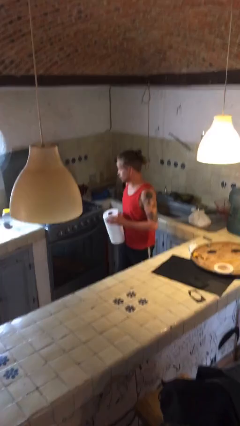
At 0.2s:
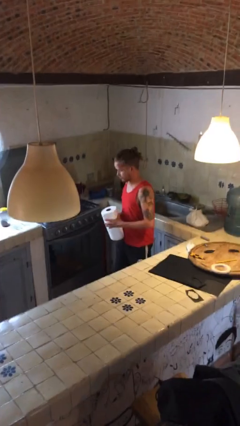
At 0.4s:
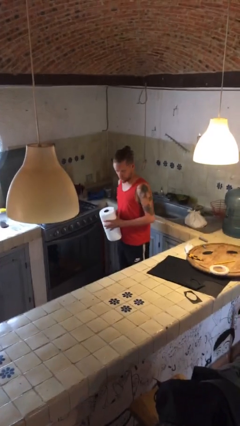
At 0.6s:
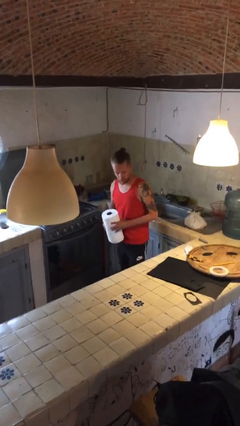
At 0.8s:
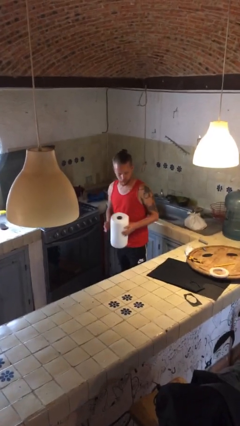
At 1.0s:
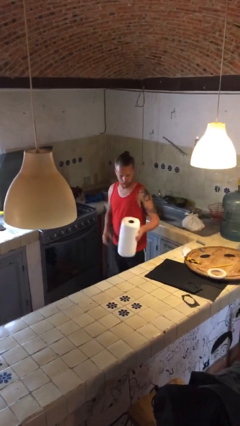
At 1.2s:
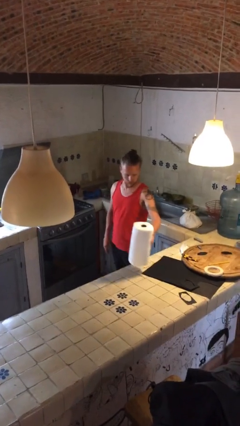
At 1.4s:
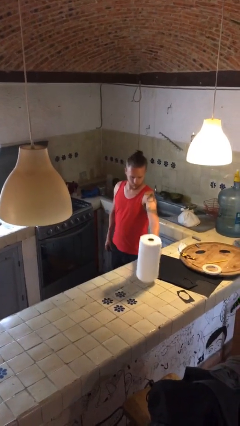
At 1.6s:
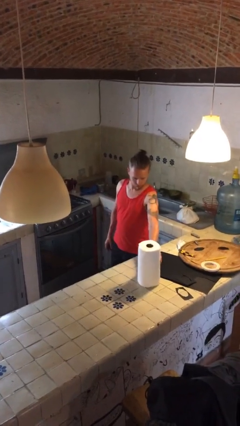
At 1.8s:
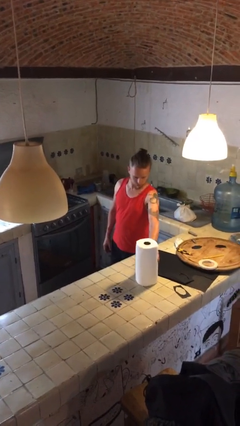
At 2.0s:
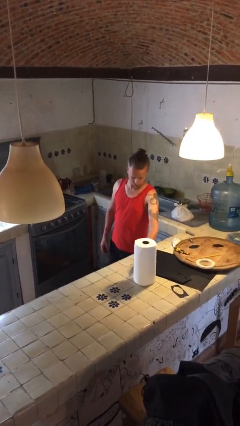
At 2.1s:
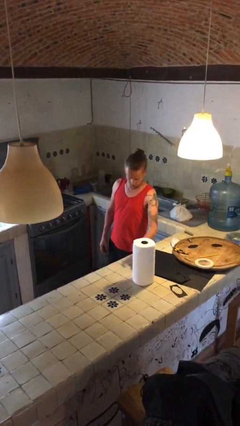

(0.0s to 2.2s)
person puts down object on countertop

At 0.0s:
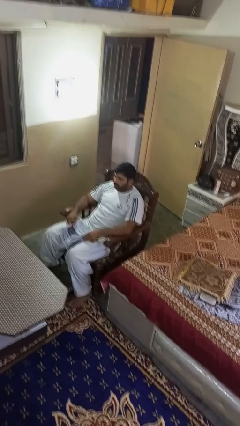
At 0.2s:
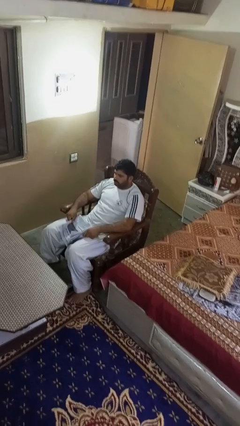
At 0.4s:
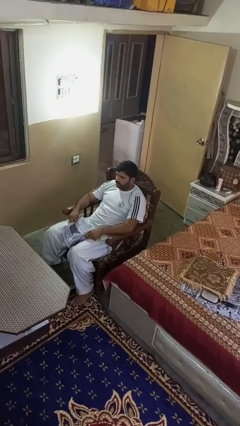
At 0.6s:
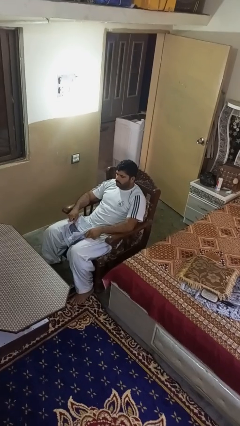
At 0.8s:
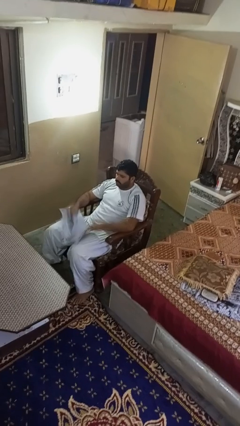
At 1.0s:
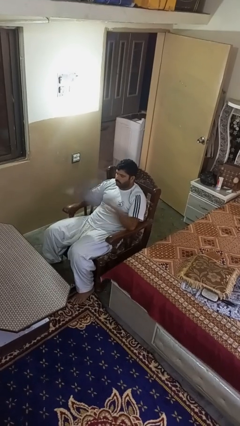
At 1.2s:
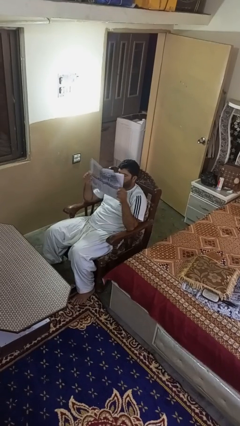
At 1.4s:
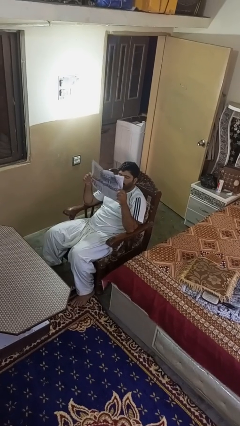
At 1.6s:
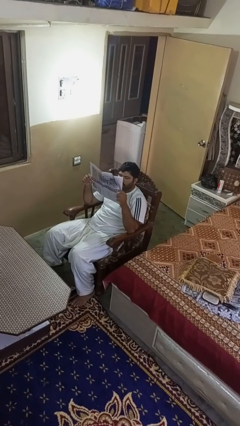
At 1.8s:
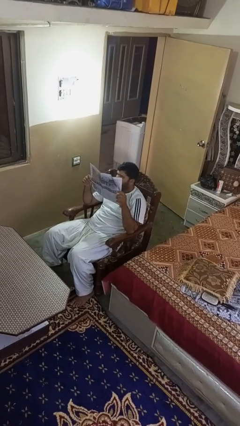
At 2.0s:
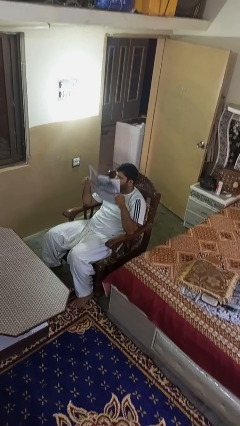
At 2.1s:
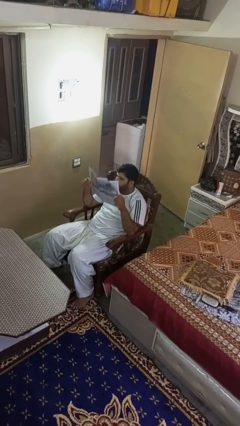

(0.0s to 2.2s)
person reads newspaper

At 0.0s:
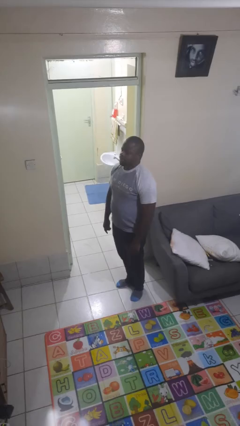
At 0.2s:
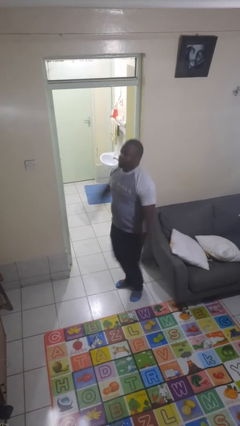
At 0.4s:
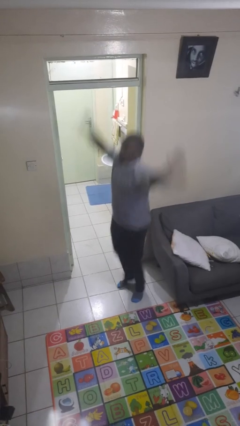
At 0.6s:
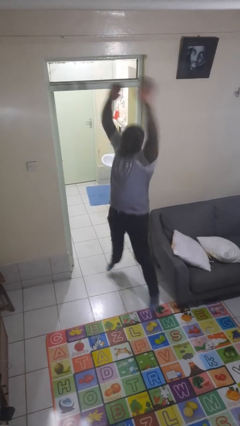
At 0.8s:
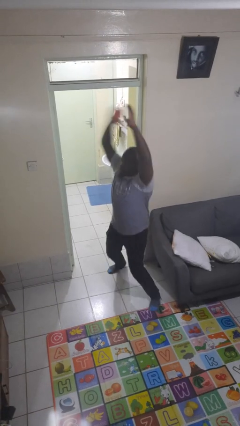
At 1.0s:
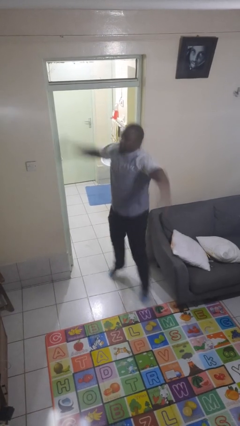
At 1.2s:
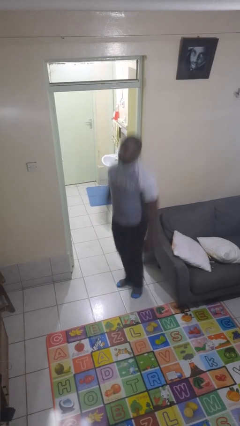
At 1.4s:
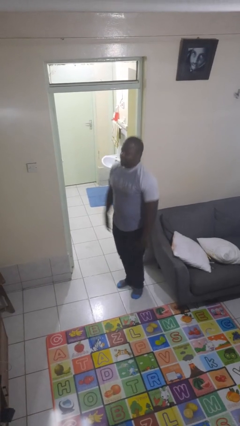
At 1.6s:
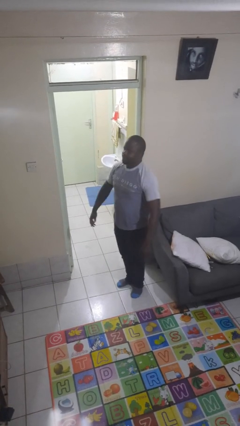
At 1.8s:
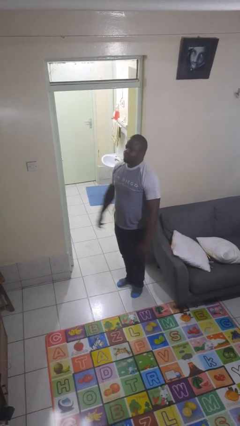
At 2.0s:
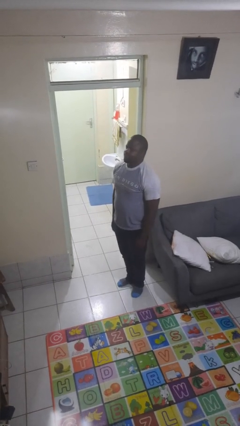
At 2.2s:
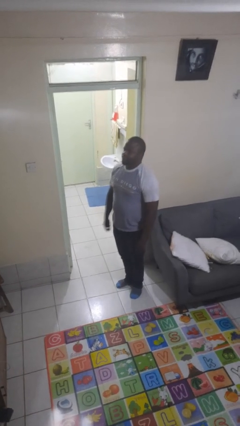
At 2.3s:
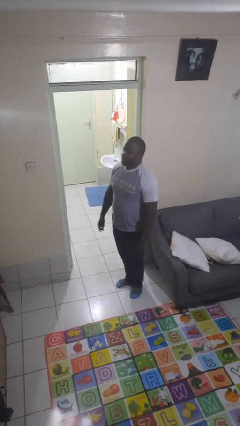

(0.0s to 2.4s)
person exercises with jumping jacks

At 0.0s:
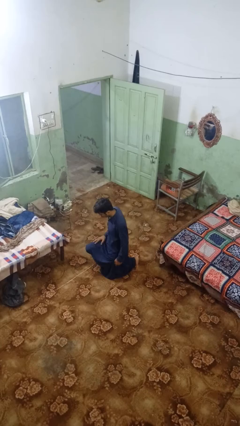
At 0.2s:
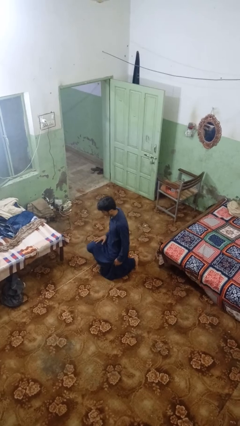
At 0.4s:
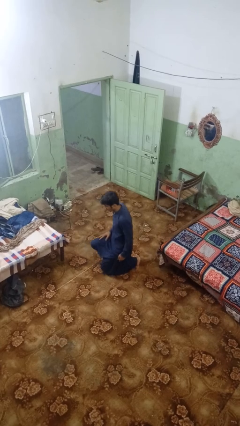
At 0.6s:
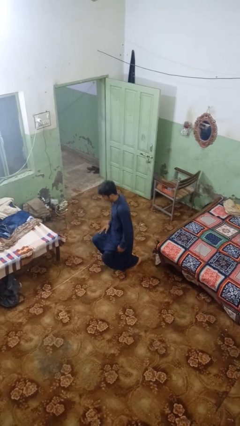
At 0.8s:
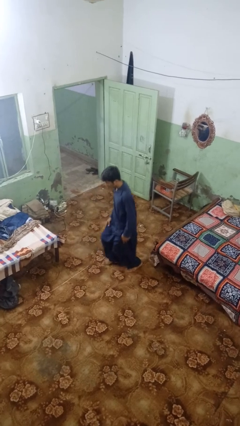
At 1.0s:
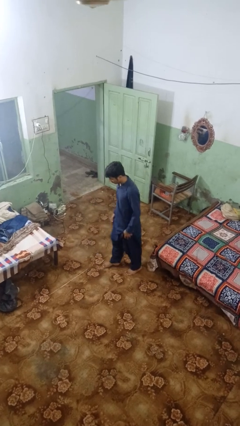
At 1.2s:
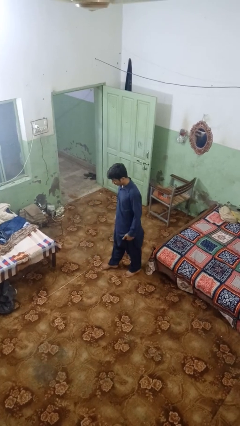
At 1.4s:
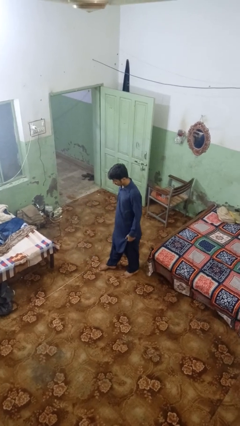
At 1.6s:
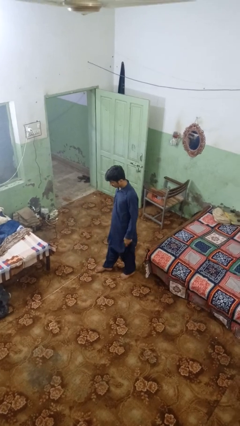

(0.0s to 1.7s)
person stands up from floor

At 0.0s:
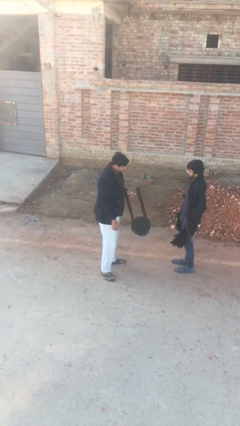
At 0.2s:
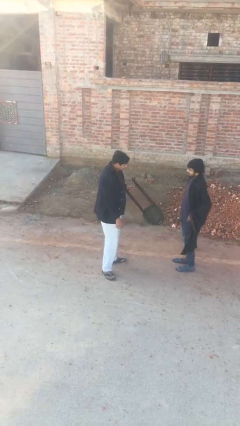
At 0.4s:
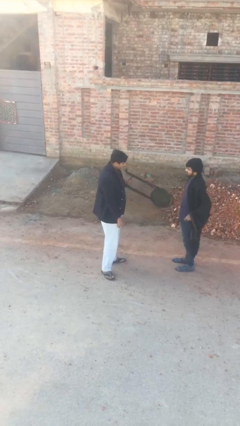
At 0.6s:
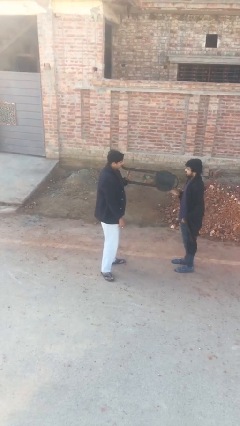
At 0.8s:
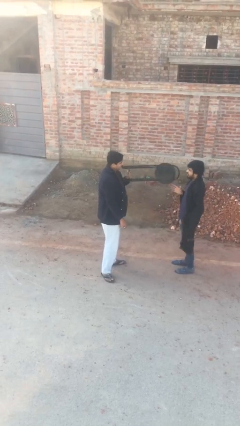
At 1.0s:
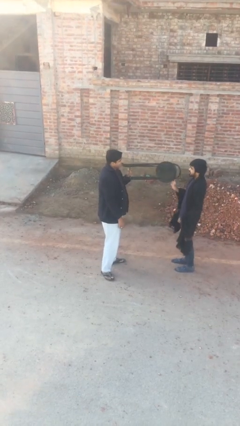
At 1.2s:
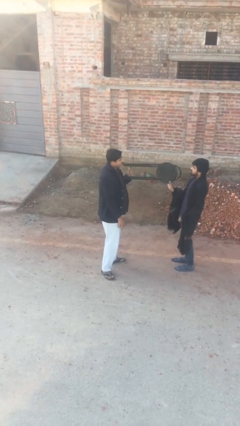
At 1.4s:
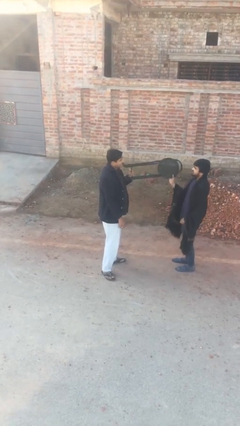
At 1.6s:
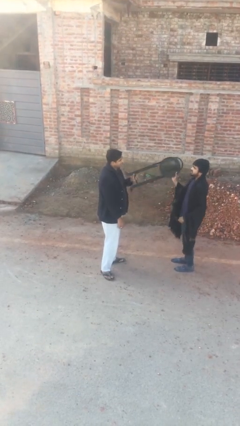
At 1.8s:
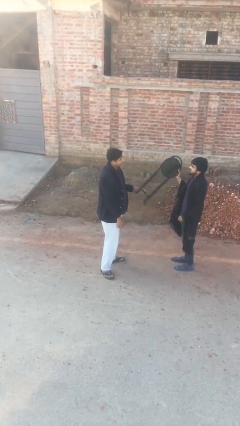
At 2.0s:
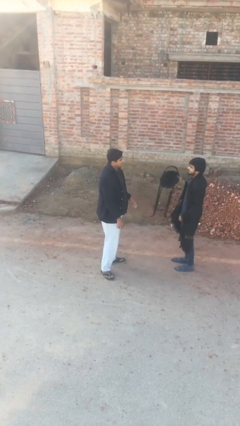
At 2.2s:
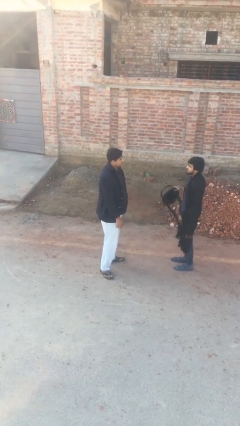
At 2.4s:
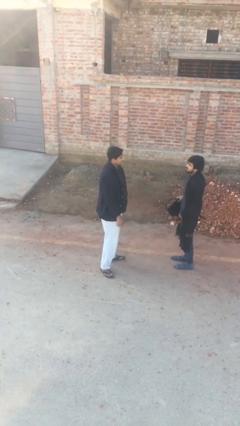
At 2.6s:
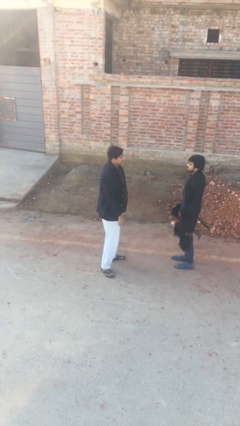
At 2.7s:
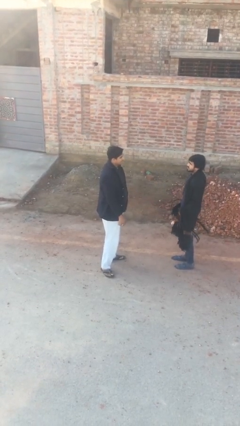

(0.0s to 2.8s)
person transfers object to person

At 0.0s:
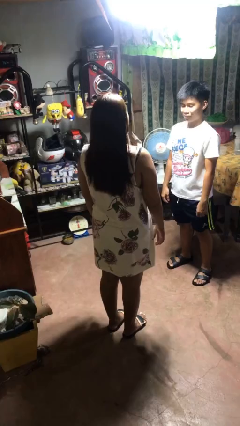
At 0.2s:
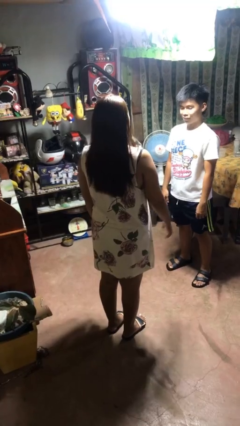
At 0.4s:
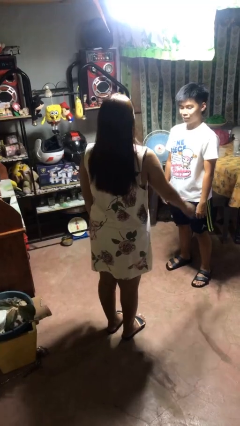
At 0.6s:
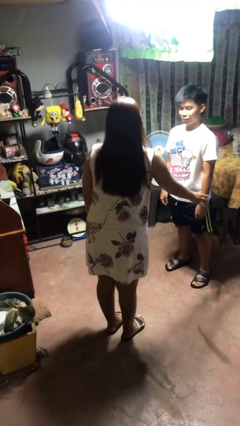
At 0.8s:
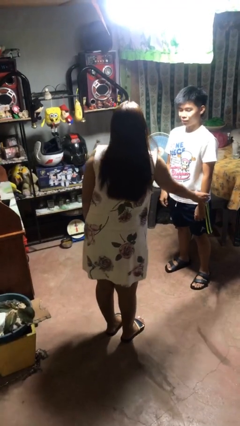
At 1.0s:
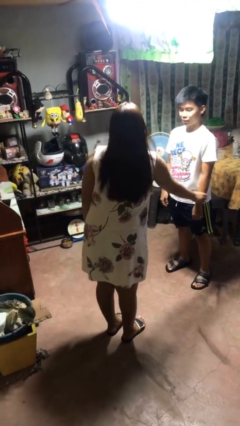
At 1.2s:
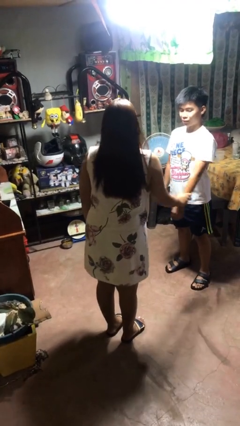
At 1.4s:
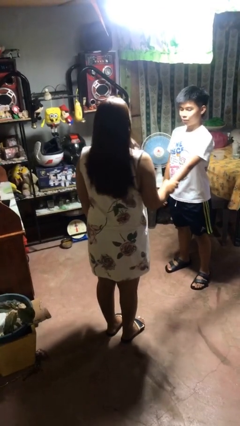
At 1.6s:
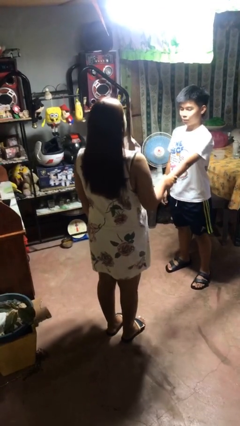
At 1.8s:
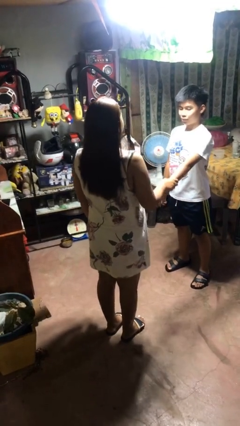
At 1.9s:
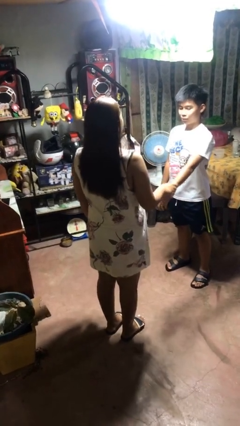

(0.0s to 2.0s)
person grabs person by forearm

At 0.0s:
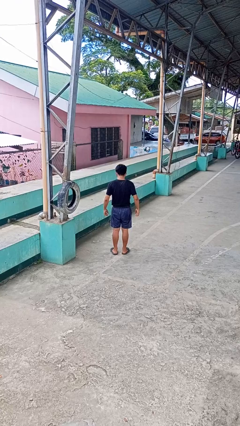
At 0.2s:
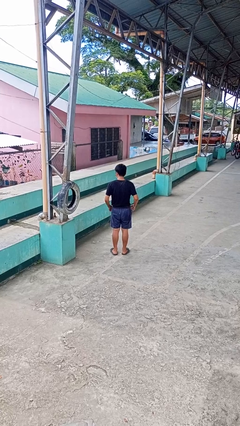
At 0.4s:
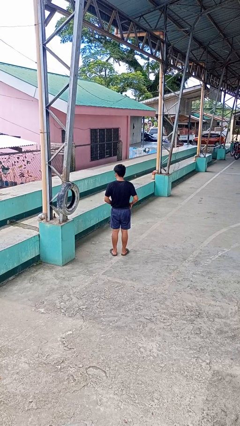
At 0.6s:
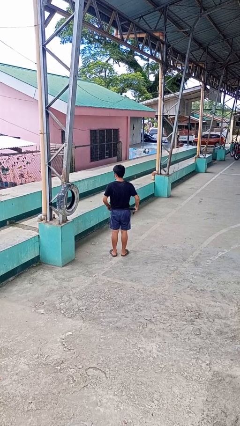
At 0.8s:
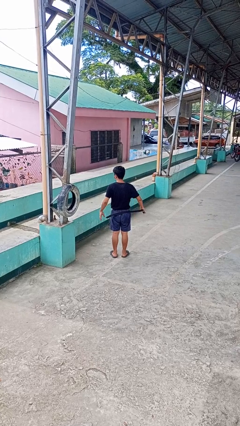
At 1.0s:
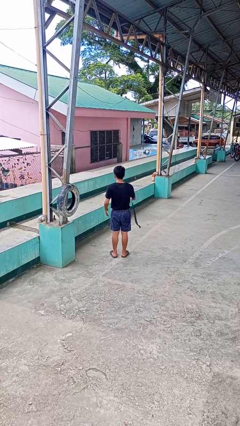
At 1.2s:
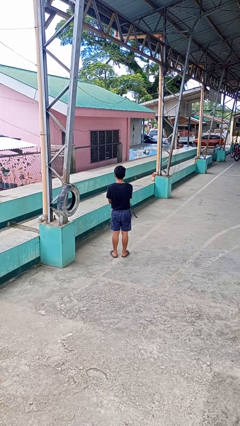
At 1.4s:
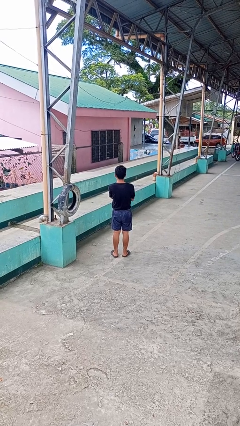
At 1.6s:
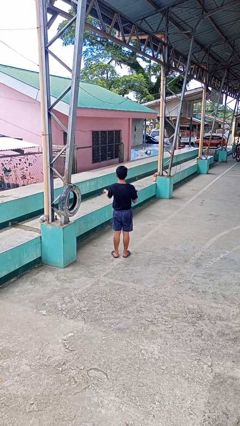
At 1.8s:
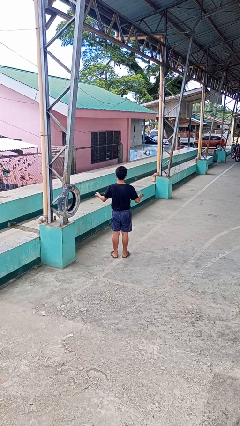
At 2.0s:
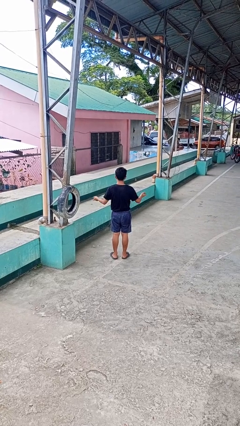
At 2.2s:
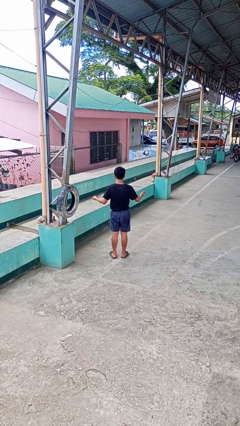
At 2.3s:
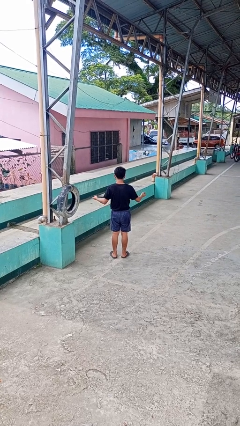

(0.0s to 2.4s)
person takes off belt

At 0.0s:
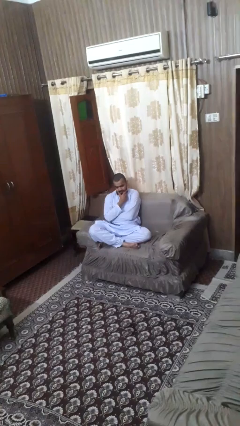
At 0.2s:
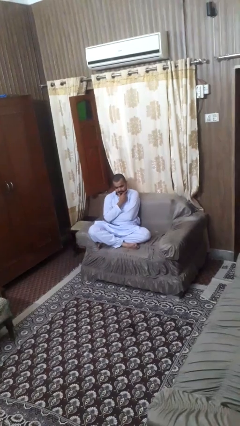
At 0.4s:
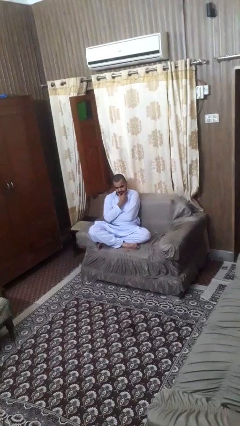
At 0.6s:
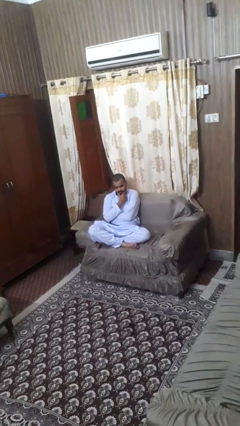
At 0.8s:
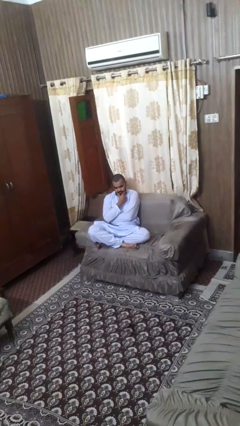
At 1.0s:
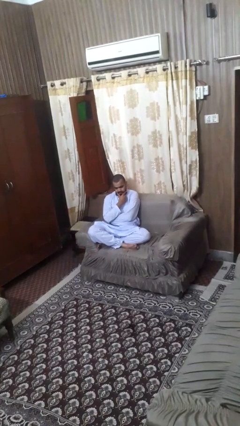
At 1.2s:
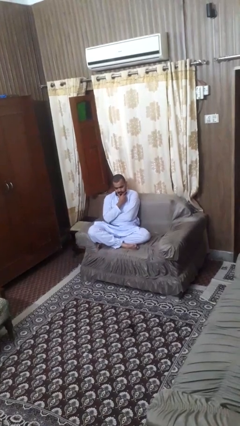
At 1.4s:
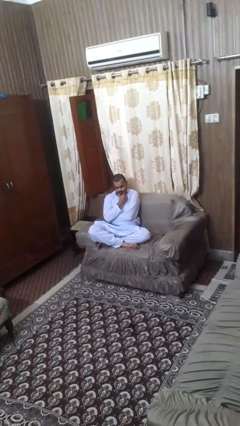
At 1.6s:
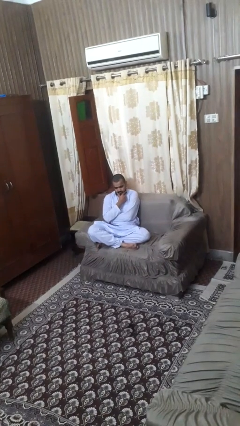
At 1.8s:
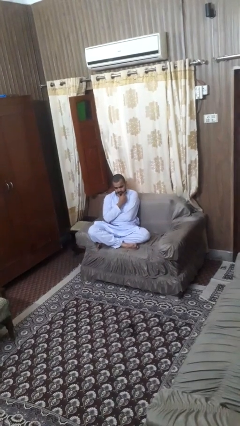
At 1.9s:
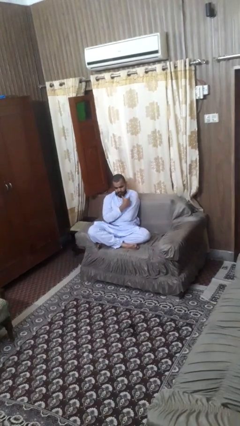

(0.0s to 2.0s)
person strokes chin
